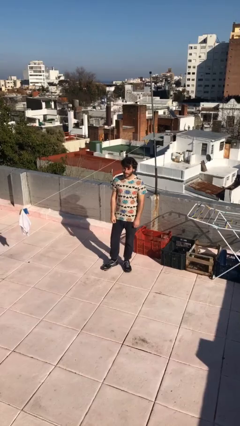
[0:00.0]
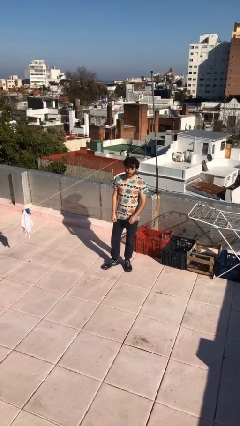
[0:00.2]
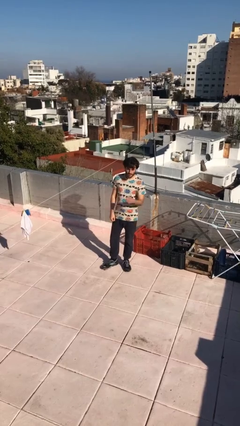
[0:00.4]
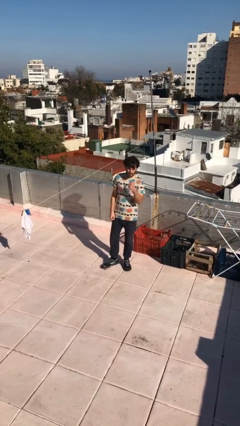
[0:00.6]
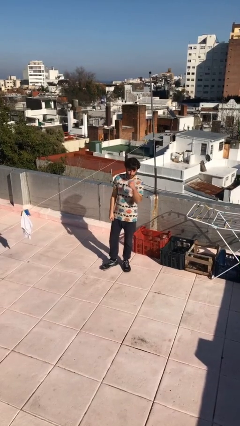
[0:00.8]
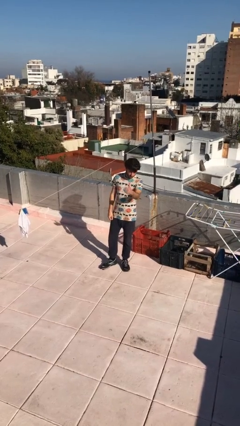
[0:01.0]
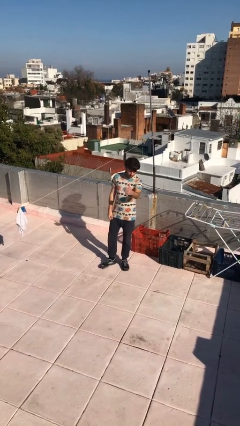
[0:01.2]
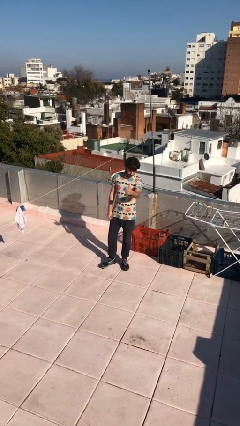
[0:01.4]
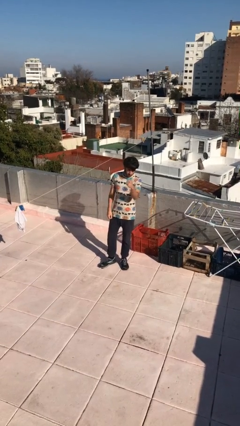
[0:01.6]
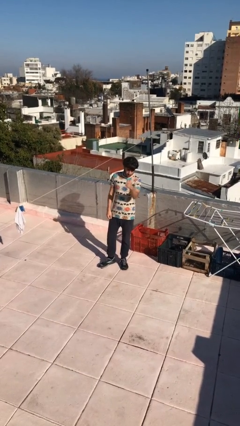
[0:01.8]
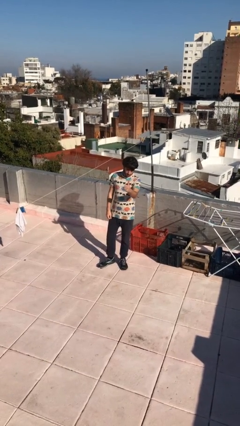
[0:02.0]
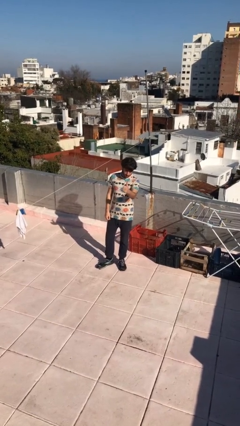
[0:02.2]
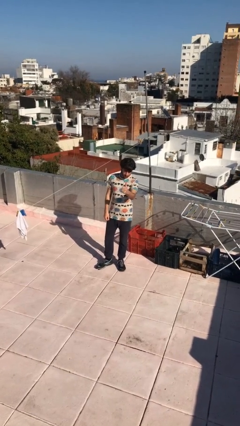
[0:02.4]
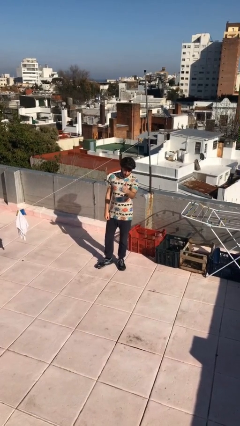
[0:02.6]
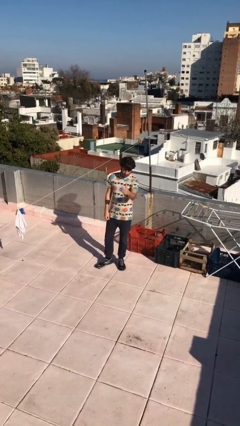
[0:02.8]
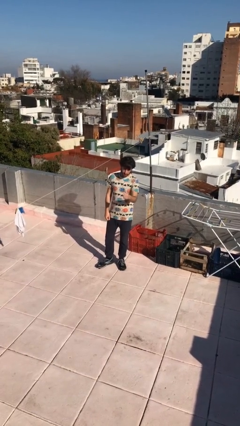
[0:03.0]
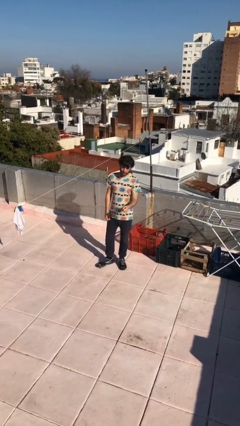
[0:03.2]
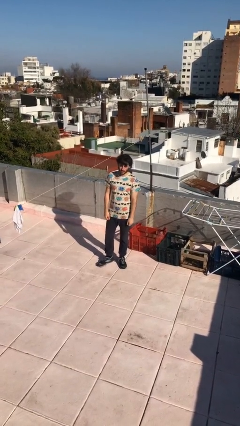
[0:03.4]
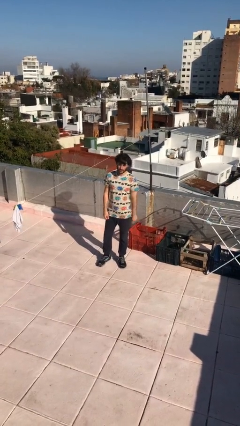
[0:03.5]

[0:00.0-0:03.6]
person gestures thumbs up

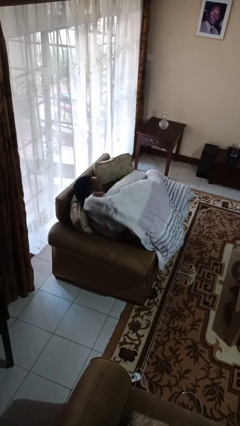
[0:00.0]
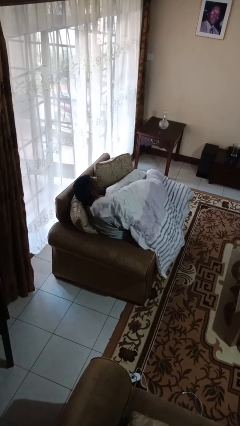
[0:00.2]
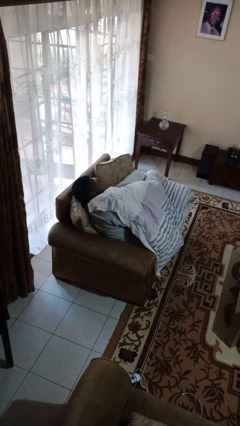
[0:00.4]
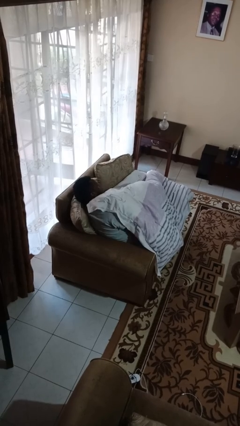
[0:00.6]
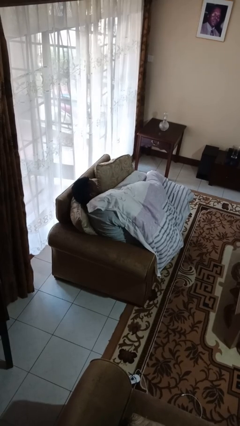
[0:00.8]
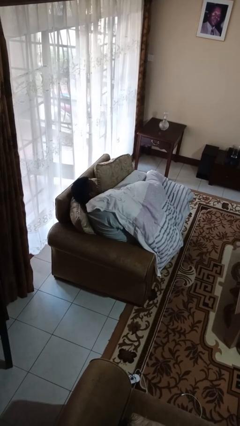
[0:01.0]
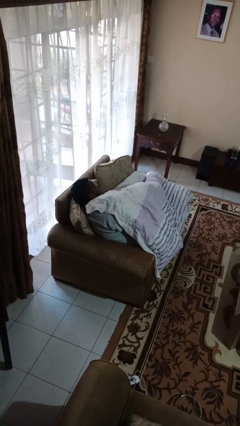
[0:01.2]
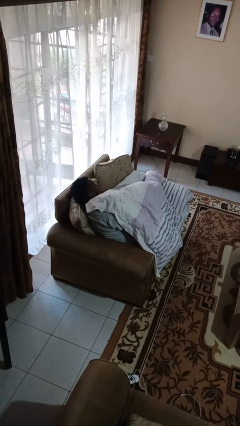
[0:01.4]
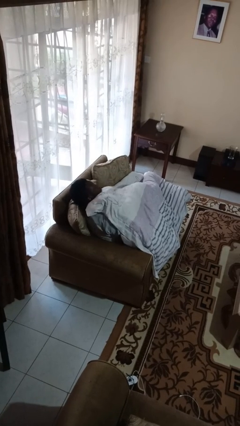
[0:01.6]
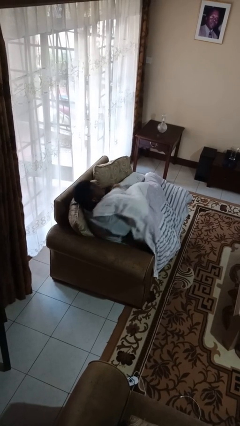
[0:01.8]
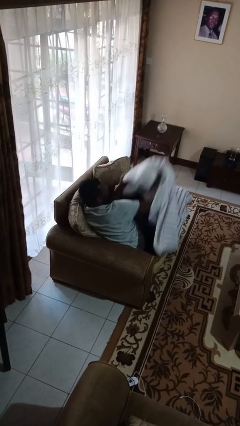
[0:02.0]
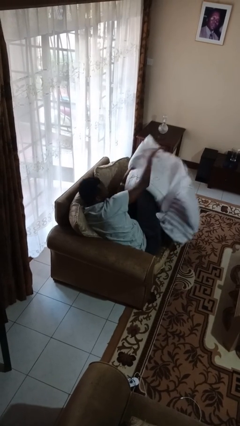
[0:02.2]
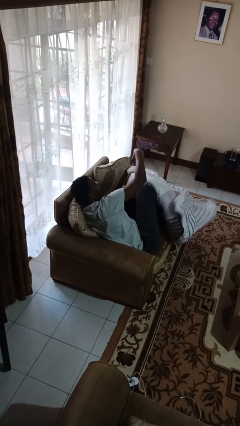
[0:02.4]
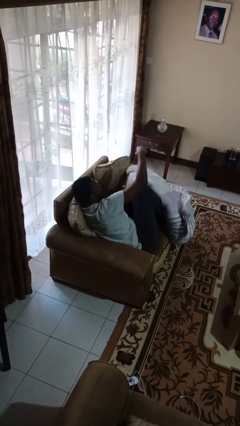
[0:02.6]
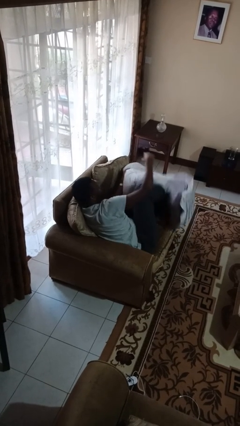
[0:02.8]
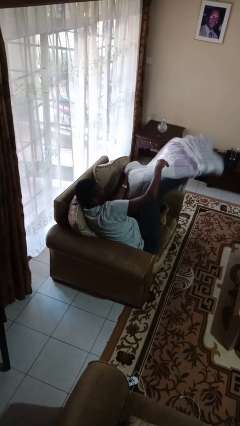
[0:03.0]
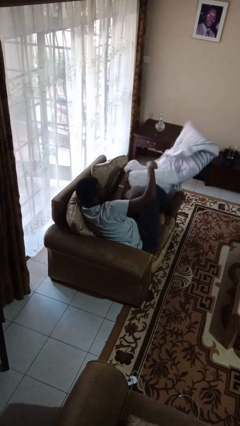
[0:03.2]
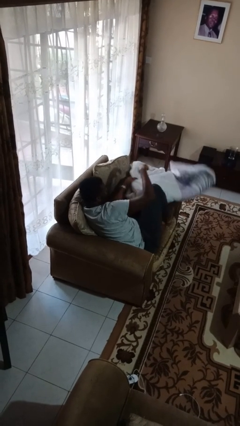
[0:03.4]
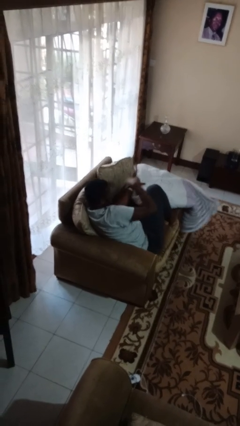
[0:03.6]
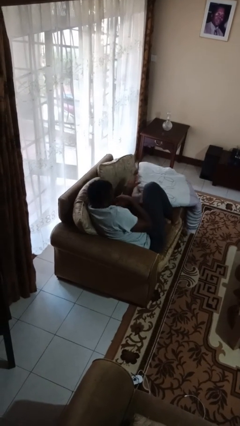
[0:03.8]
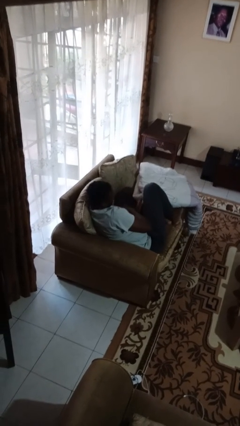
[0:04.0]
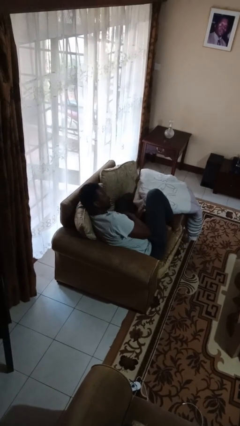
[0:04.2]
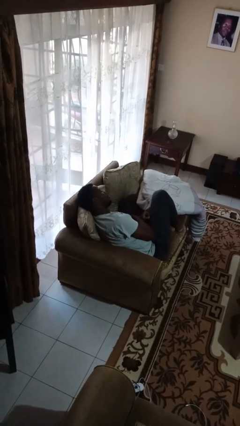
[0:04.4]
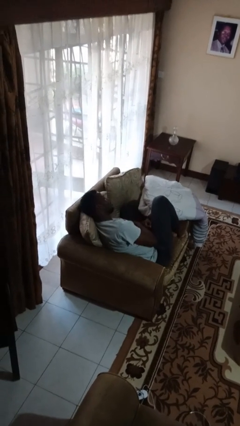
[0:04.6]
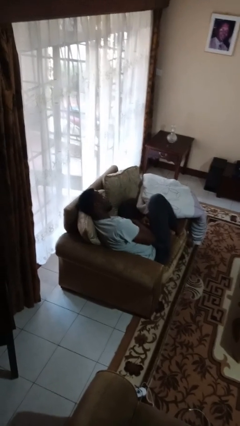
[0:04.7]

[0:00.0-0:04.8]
person uncovers with blanket

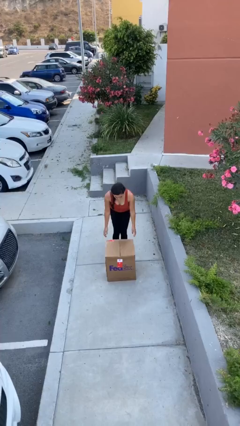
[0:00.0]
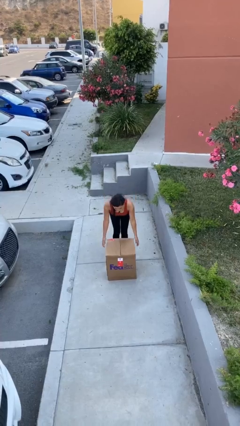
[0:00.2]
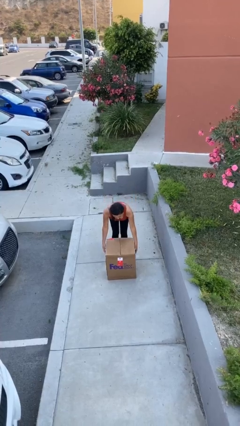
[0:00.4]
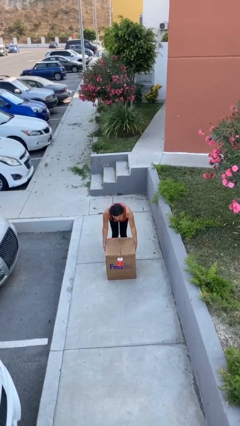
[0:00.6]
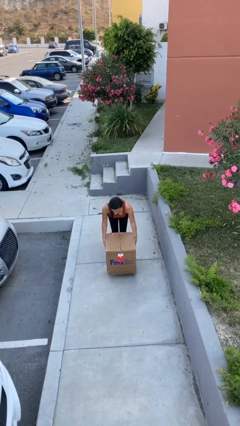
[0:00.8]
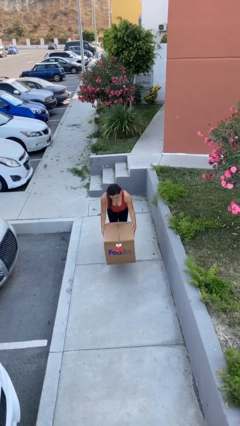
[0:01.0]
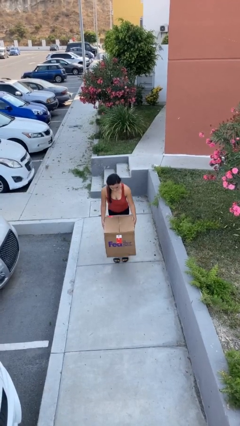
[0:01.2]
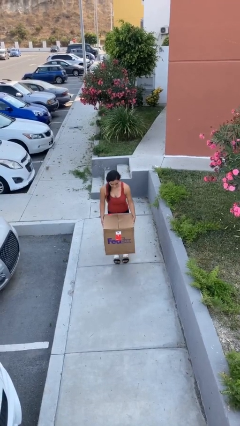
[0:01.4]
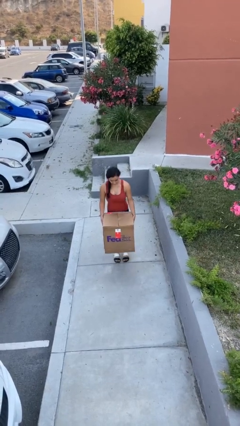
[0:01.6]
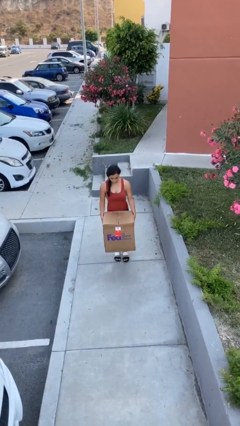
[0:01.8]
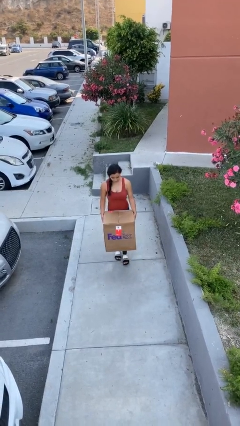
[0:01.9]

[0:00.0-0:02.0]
person picks up object from floor

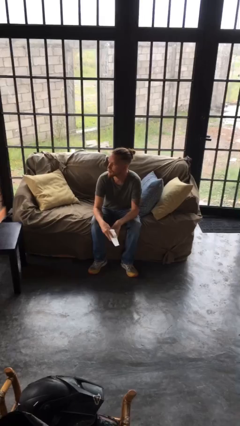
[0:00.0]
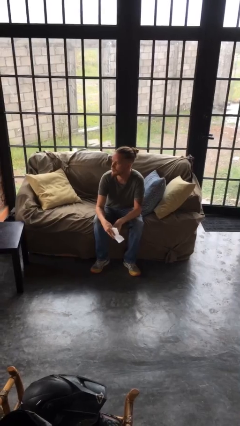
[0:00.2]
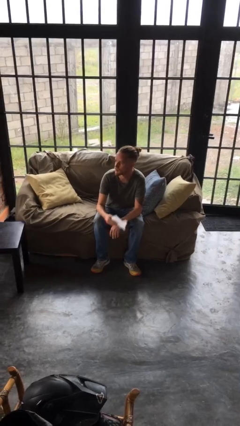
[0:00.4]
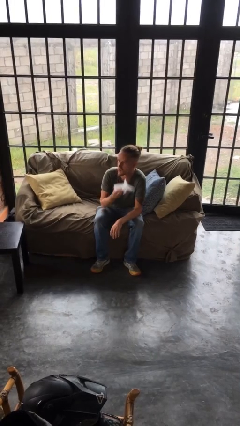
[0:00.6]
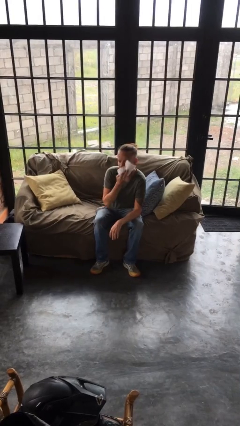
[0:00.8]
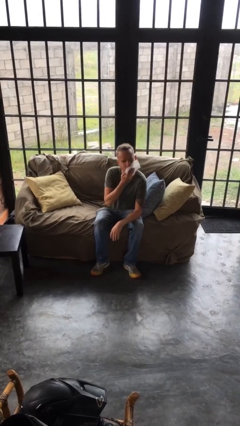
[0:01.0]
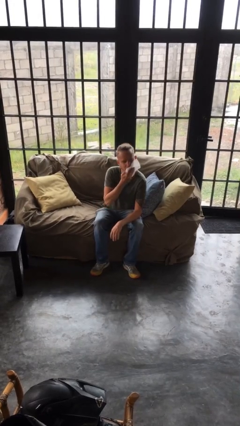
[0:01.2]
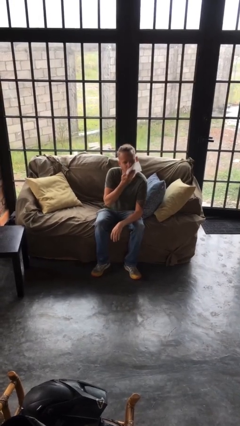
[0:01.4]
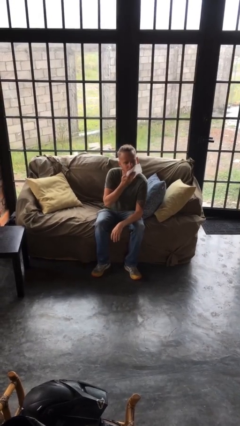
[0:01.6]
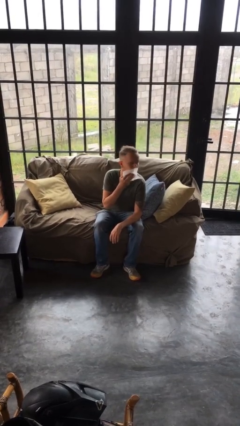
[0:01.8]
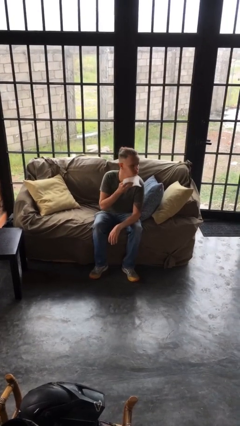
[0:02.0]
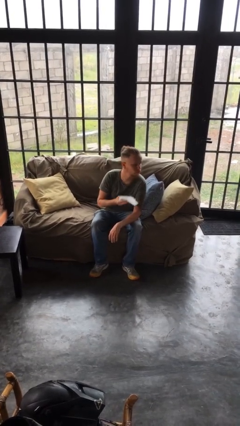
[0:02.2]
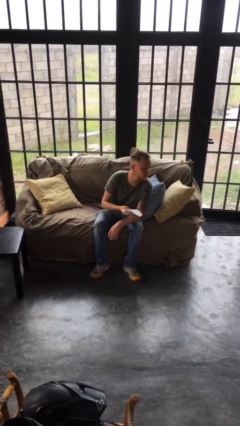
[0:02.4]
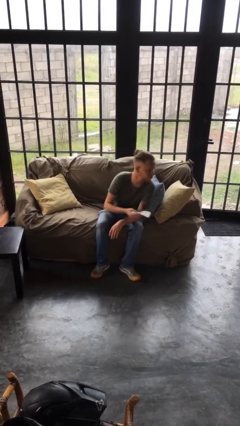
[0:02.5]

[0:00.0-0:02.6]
person wipes mouth with napkin

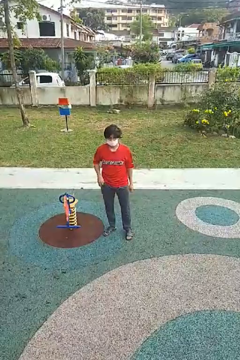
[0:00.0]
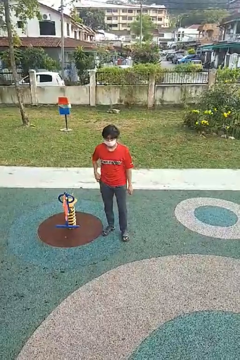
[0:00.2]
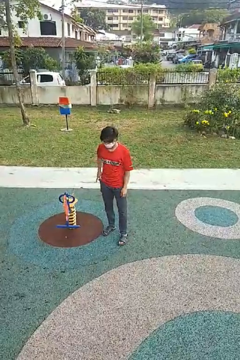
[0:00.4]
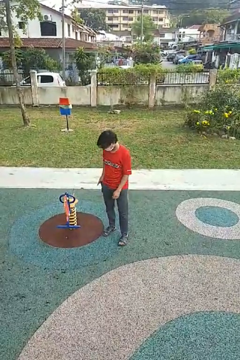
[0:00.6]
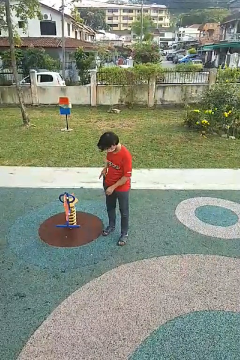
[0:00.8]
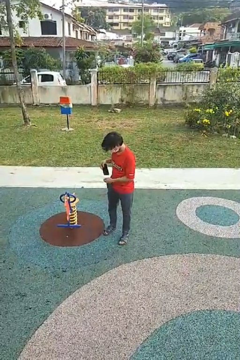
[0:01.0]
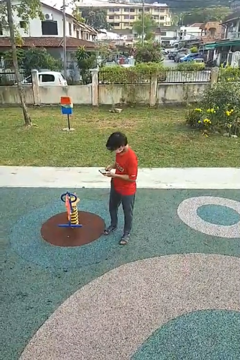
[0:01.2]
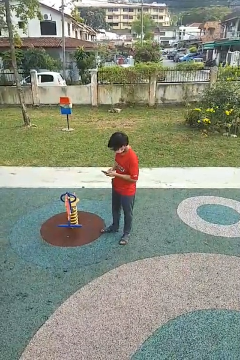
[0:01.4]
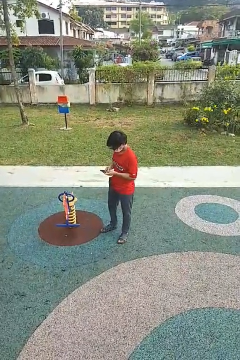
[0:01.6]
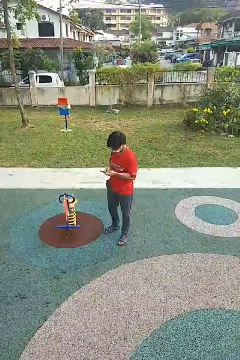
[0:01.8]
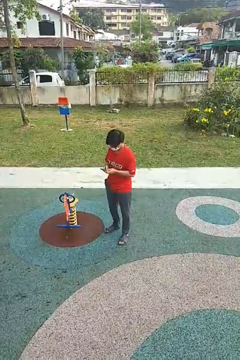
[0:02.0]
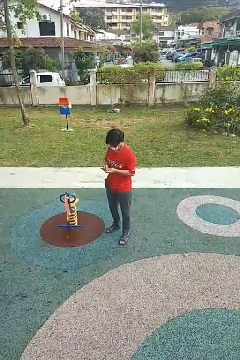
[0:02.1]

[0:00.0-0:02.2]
person takes phone from pocket

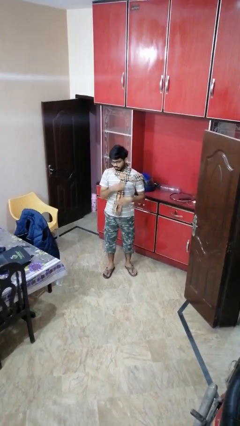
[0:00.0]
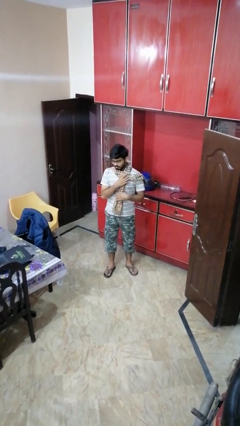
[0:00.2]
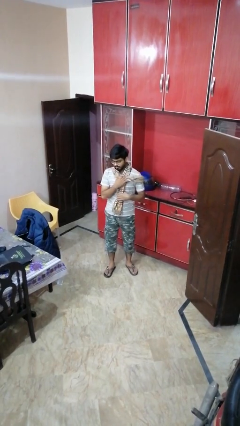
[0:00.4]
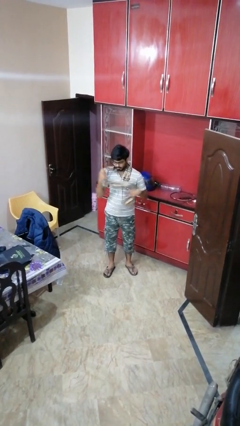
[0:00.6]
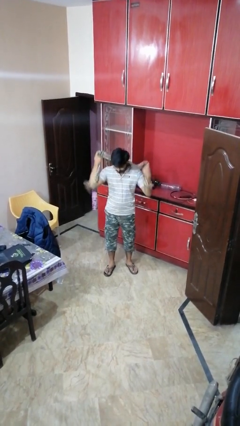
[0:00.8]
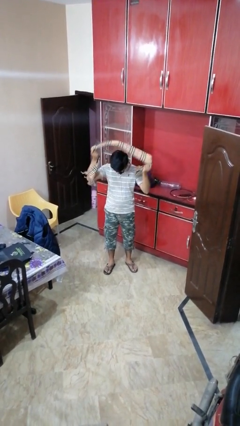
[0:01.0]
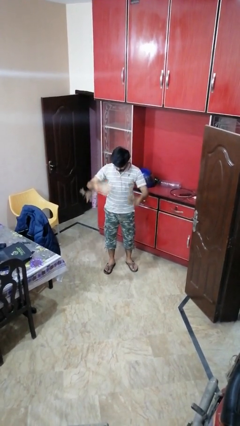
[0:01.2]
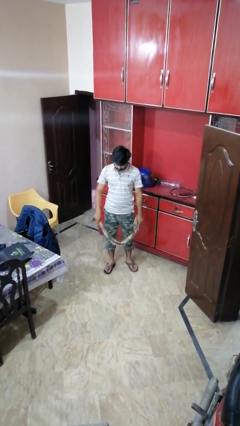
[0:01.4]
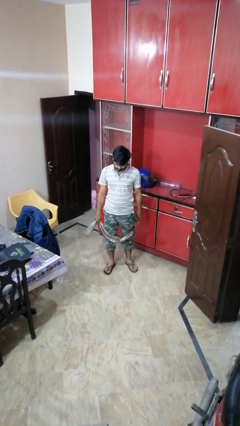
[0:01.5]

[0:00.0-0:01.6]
person takes off scarf

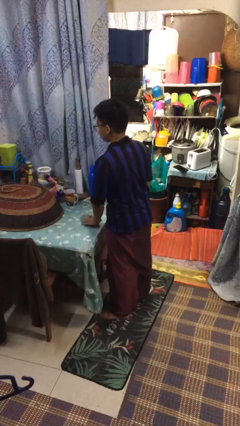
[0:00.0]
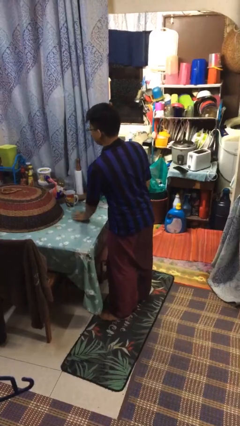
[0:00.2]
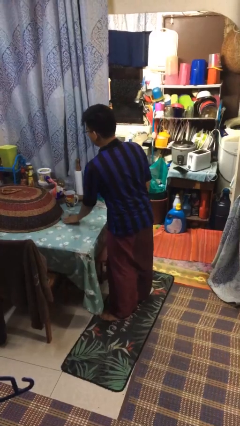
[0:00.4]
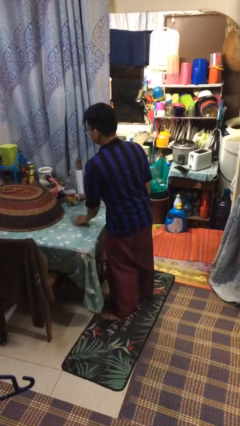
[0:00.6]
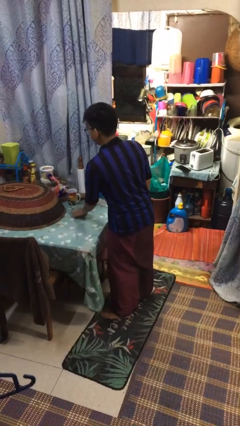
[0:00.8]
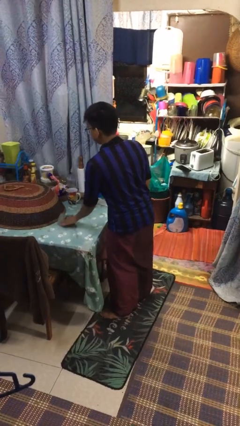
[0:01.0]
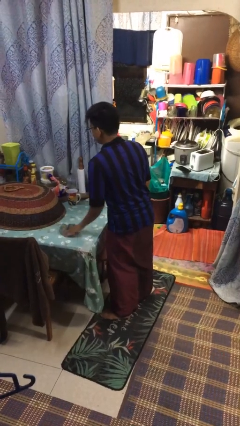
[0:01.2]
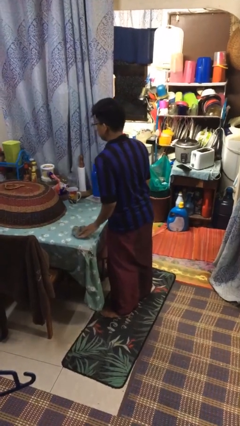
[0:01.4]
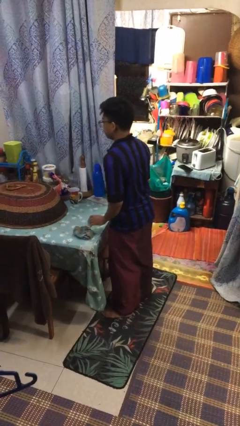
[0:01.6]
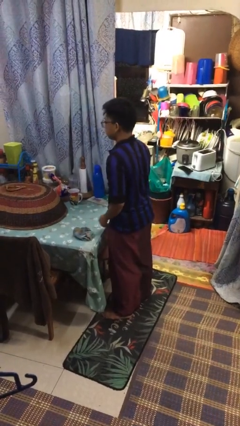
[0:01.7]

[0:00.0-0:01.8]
person cleans table with rag
